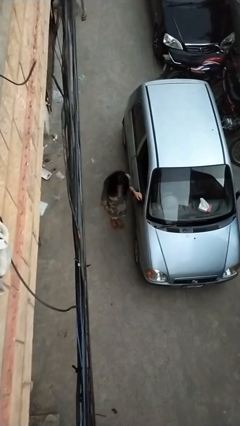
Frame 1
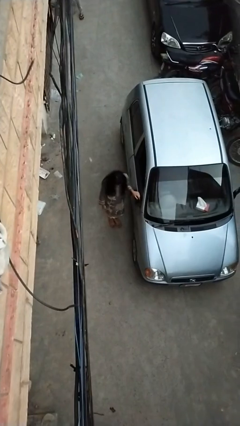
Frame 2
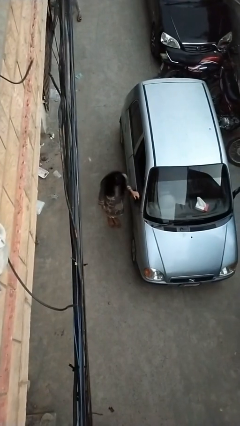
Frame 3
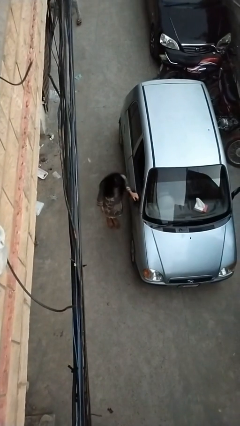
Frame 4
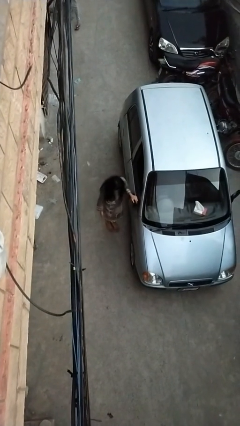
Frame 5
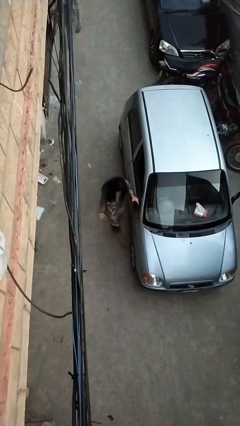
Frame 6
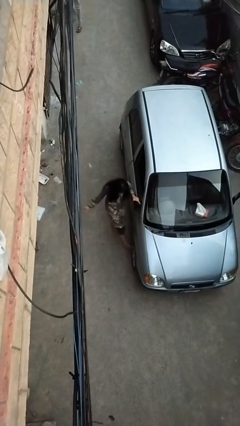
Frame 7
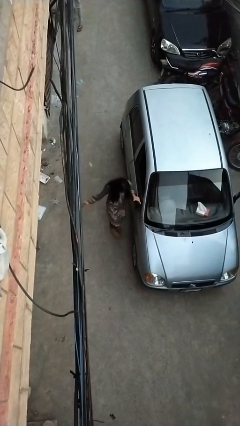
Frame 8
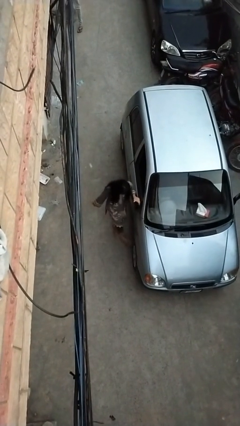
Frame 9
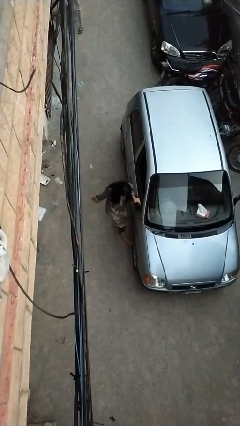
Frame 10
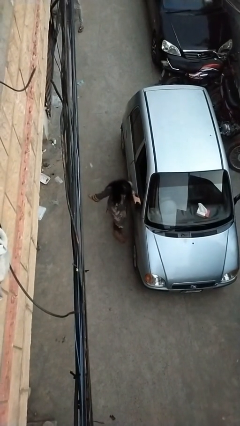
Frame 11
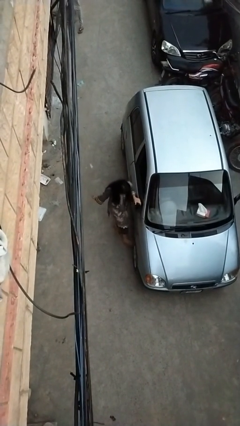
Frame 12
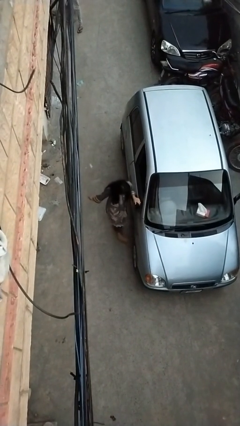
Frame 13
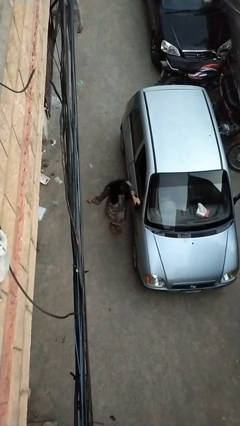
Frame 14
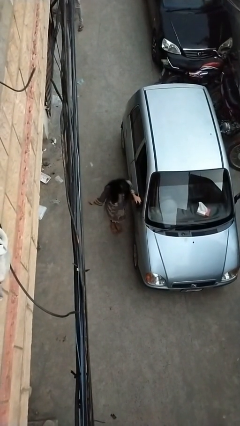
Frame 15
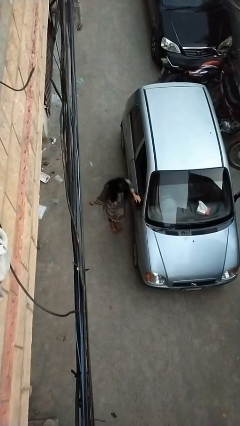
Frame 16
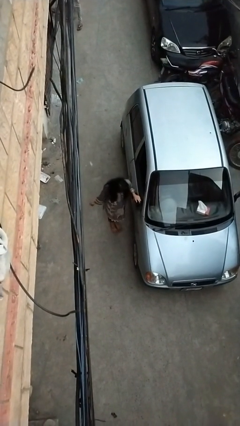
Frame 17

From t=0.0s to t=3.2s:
person kicks car tires

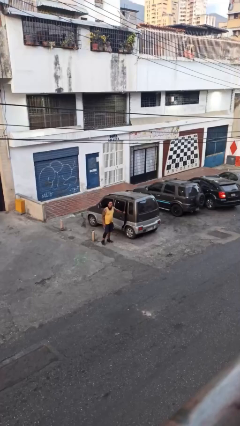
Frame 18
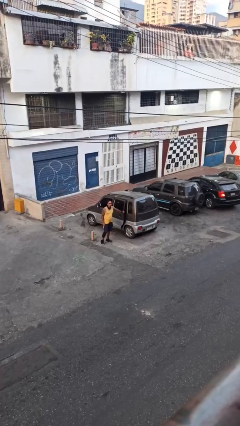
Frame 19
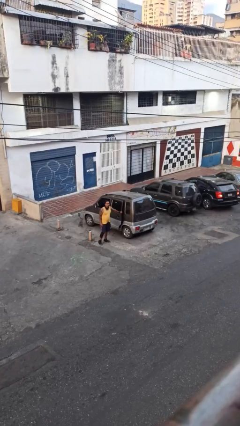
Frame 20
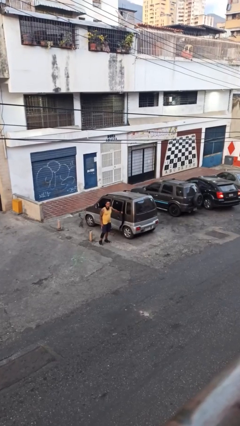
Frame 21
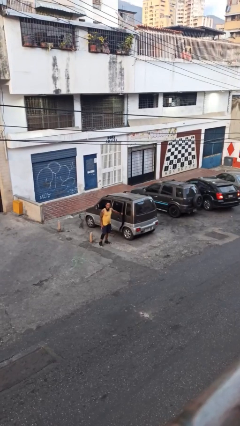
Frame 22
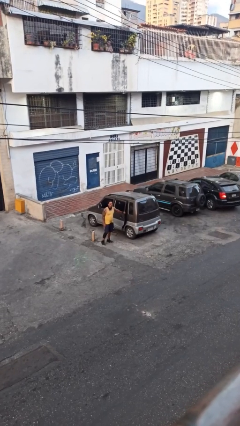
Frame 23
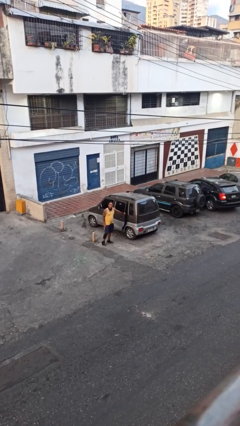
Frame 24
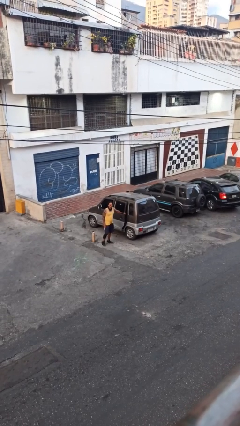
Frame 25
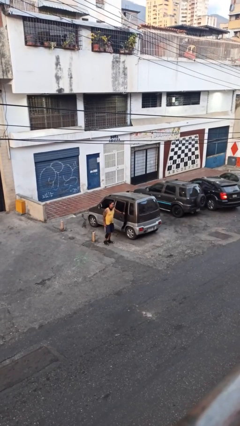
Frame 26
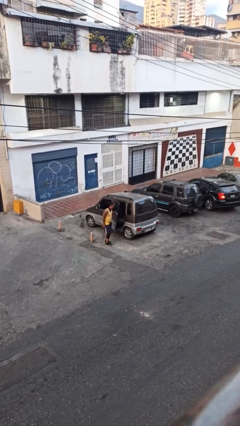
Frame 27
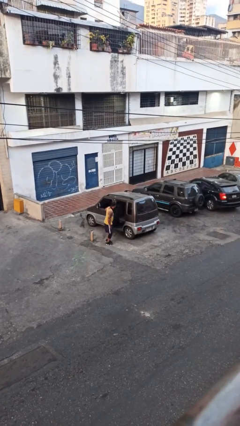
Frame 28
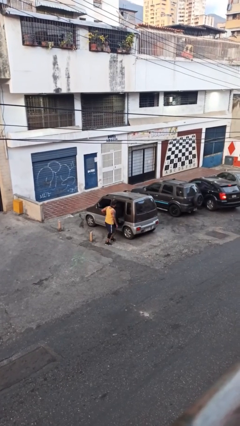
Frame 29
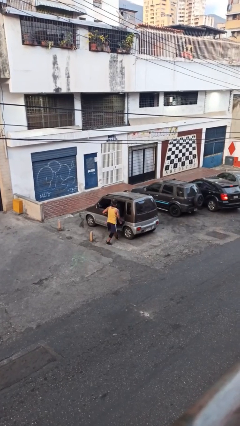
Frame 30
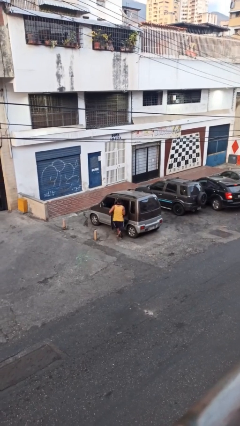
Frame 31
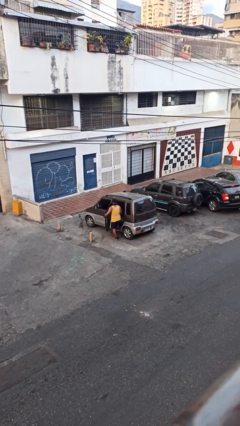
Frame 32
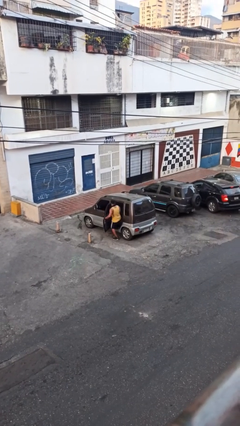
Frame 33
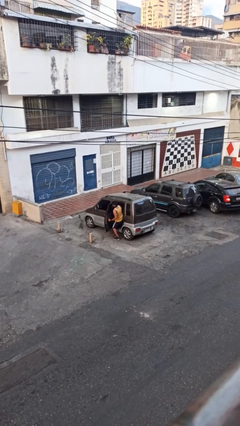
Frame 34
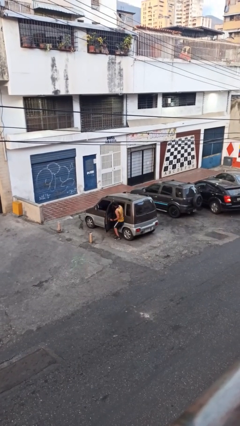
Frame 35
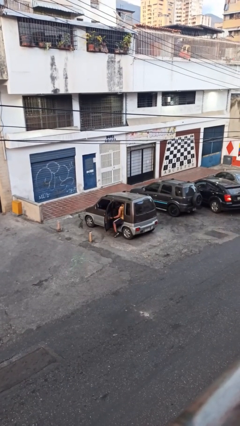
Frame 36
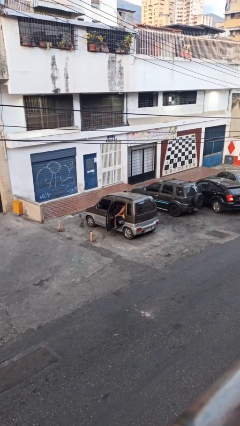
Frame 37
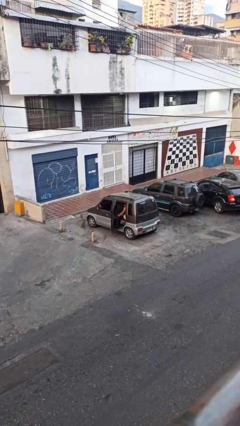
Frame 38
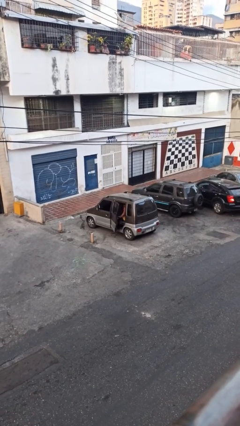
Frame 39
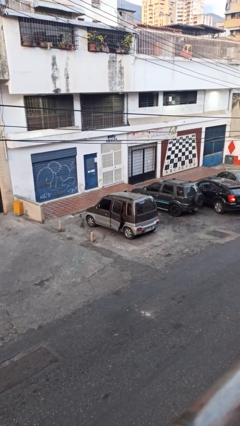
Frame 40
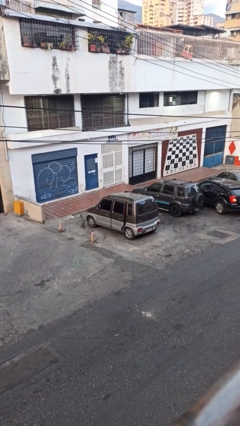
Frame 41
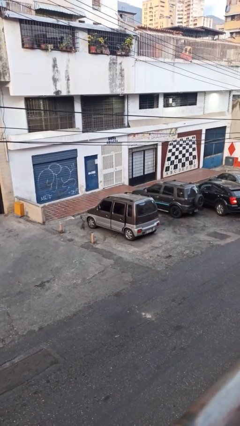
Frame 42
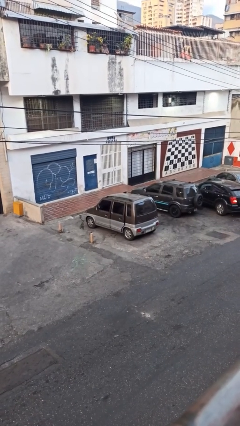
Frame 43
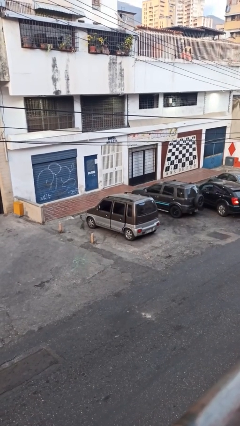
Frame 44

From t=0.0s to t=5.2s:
car picks up person

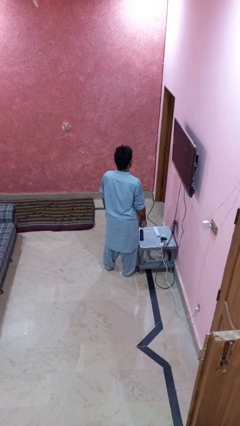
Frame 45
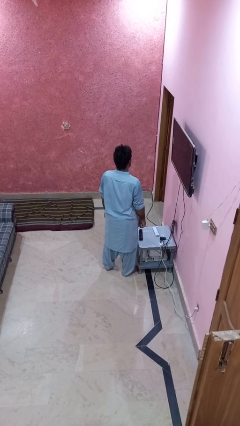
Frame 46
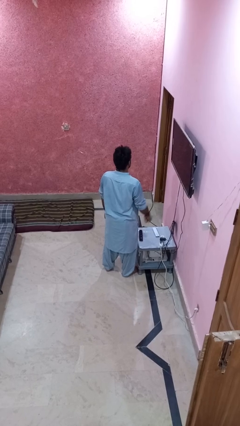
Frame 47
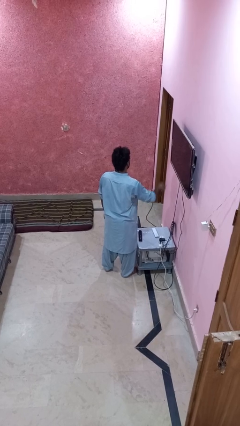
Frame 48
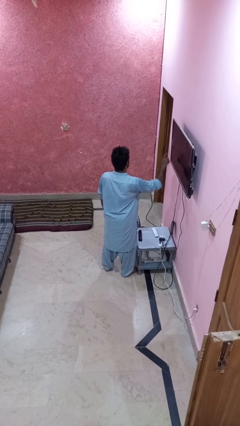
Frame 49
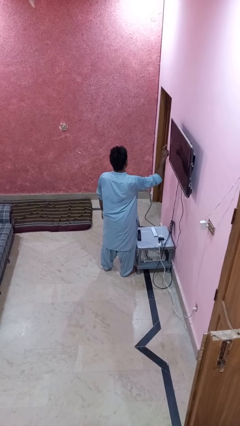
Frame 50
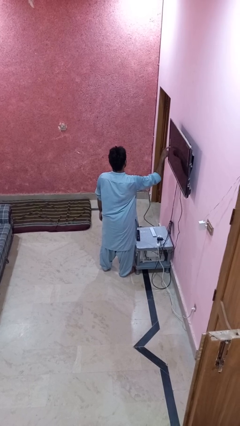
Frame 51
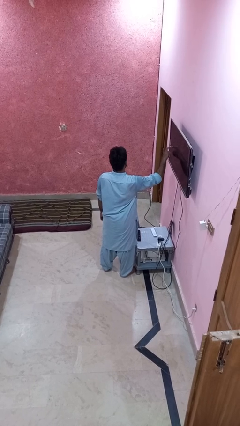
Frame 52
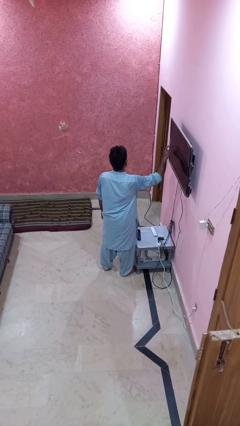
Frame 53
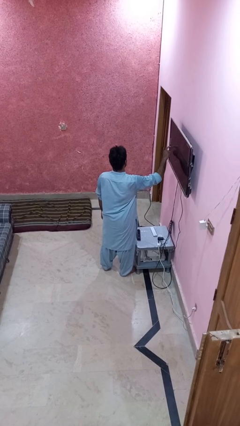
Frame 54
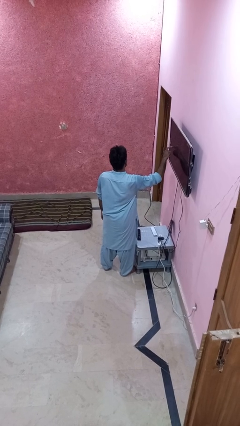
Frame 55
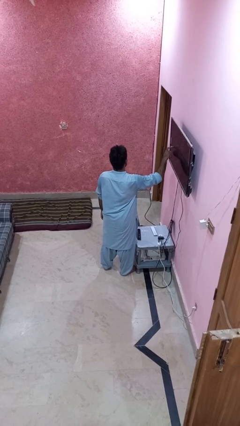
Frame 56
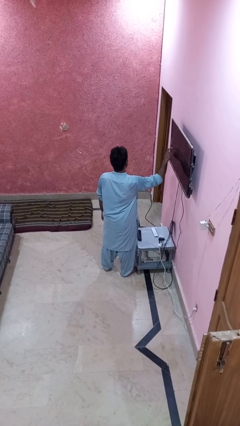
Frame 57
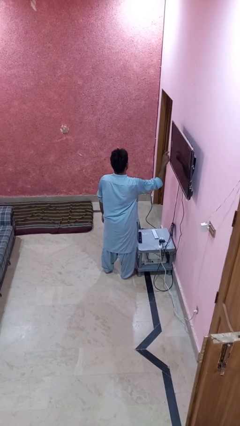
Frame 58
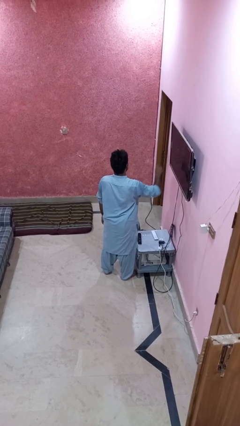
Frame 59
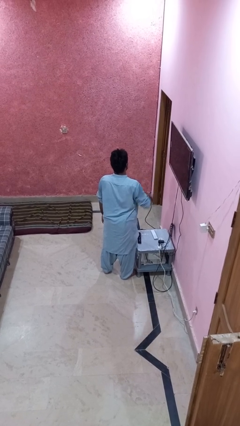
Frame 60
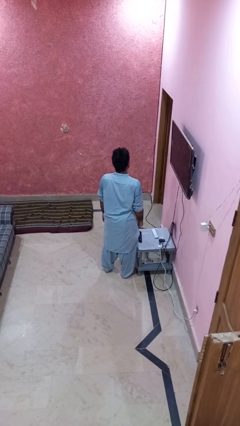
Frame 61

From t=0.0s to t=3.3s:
person taps object with finger

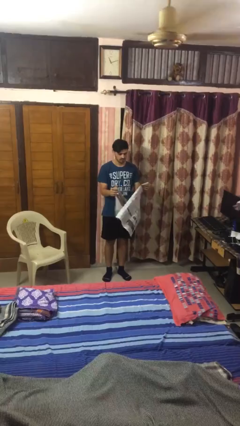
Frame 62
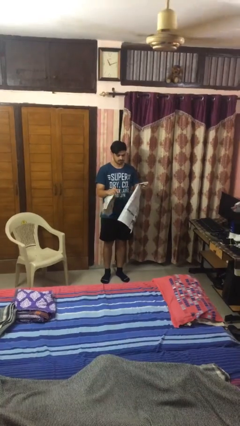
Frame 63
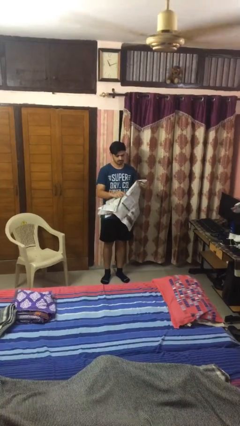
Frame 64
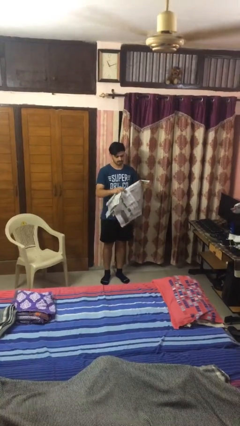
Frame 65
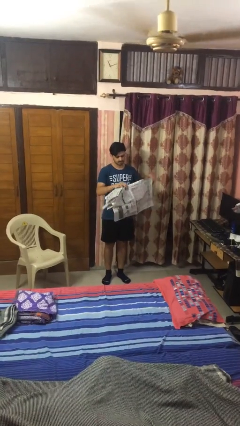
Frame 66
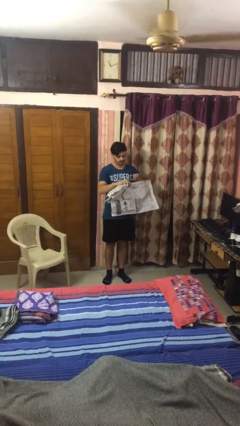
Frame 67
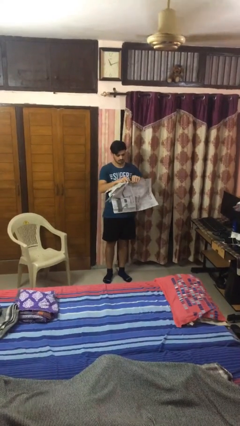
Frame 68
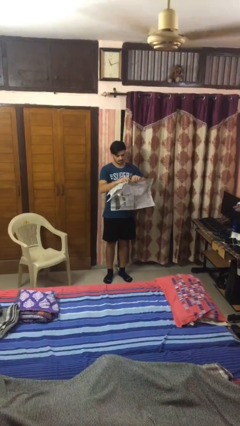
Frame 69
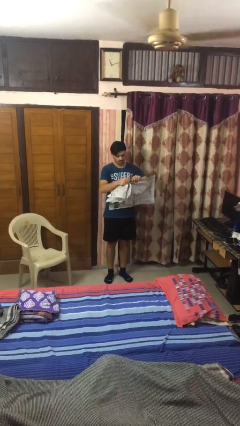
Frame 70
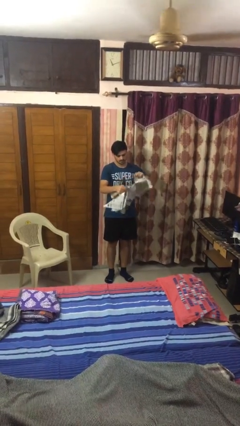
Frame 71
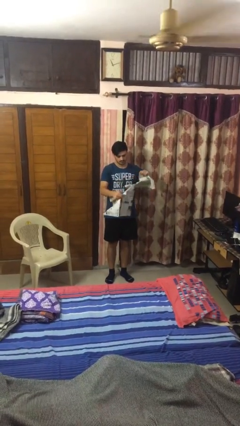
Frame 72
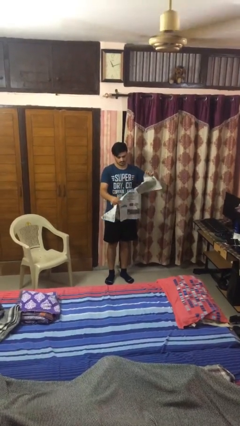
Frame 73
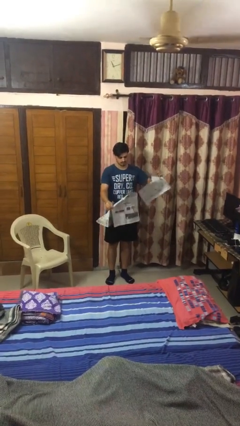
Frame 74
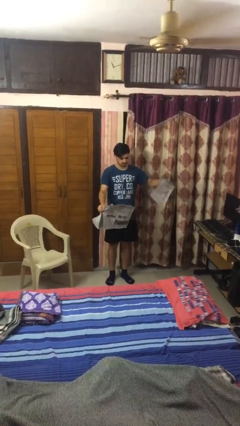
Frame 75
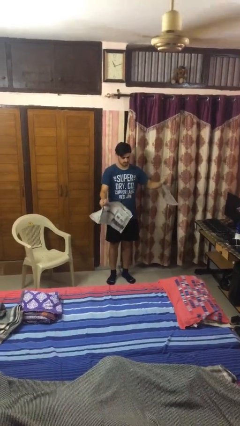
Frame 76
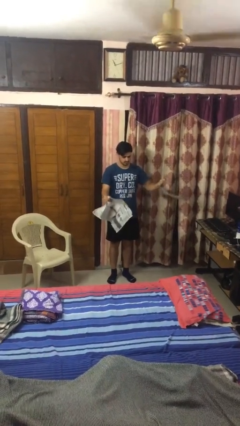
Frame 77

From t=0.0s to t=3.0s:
person tears paper

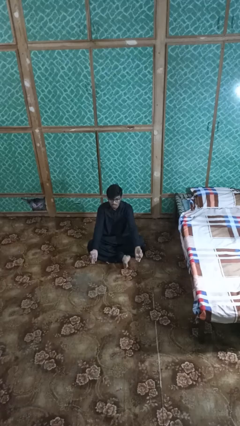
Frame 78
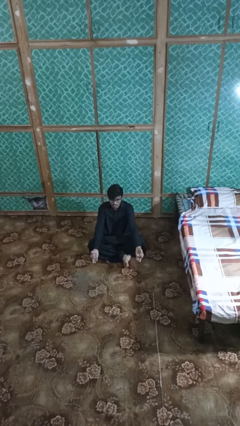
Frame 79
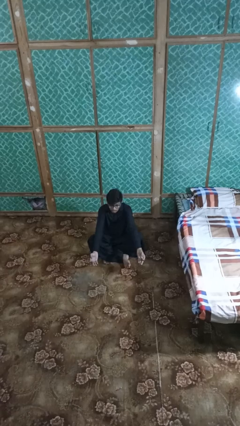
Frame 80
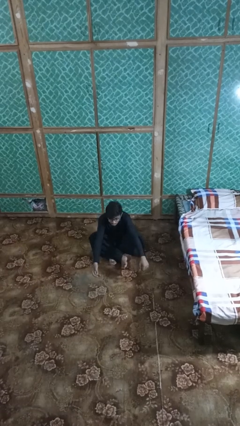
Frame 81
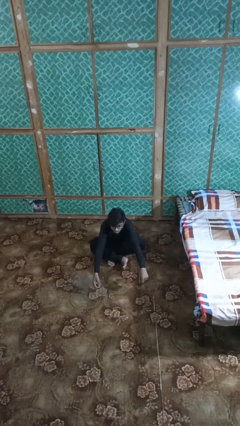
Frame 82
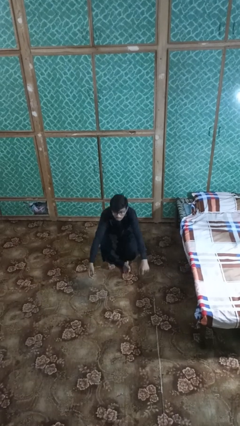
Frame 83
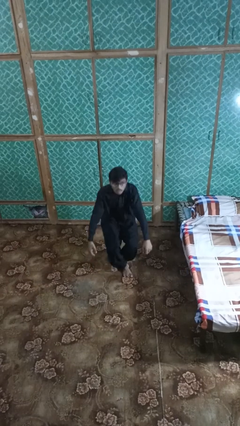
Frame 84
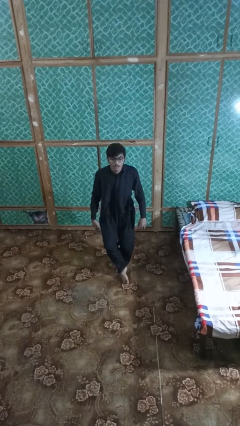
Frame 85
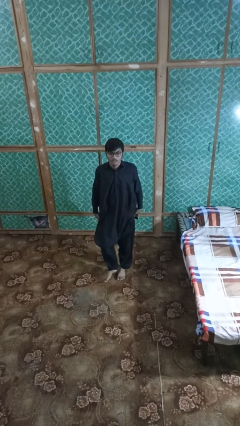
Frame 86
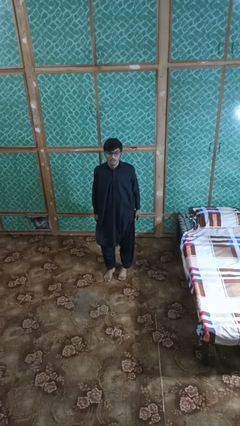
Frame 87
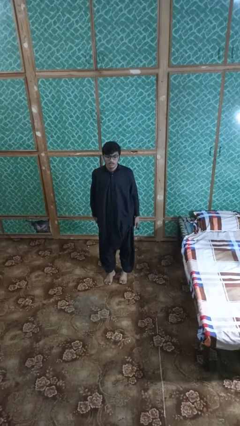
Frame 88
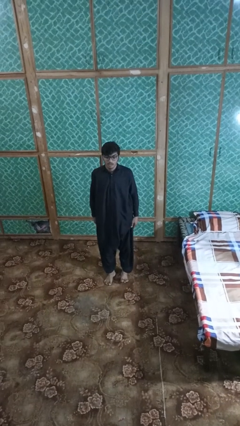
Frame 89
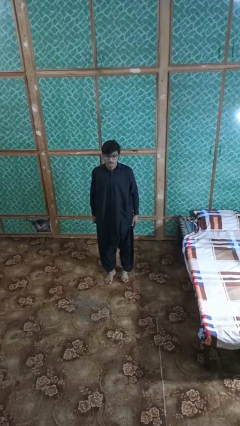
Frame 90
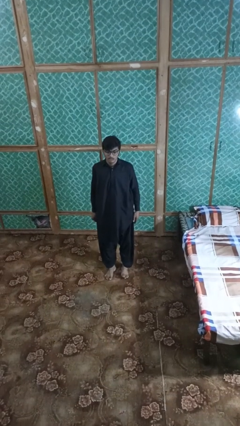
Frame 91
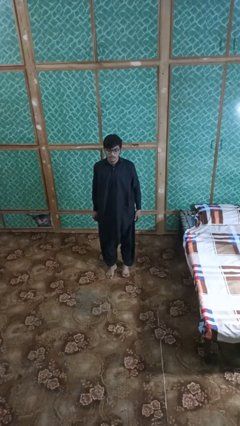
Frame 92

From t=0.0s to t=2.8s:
person stands up from floor

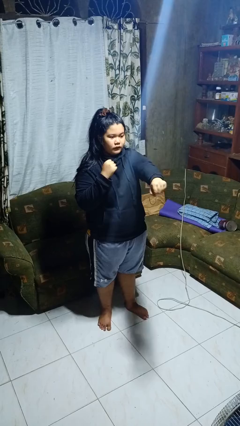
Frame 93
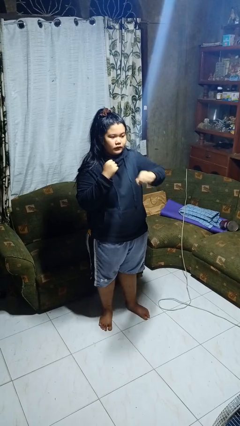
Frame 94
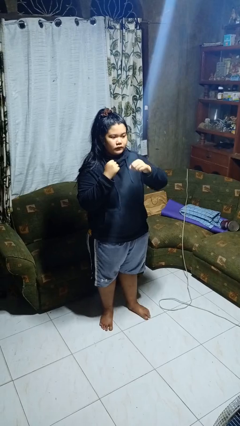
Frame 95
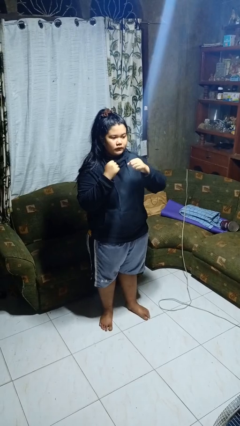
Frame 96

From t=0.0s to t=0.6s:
person punches
